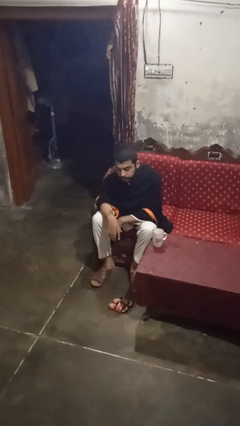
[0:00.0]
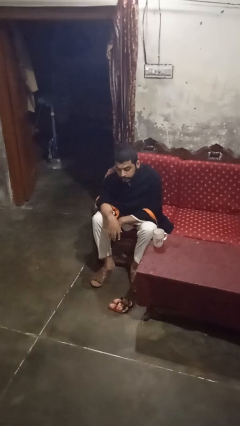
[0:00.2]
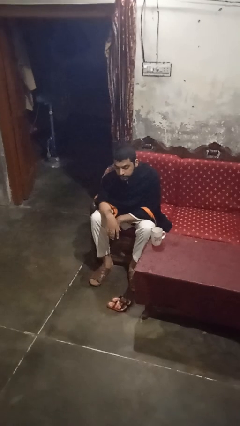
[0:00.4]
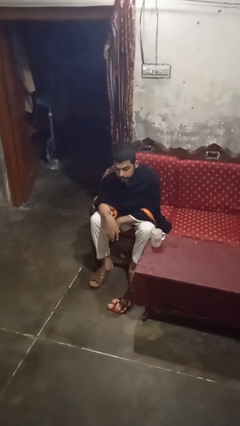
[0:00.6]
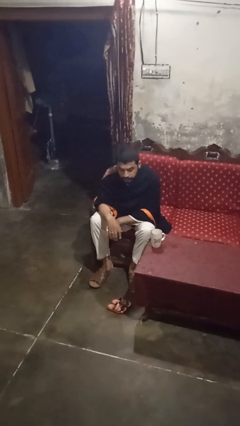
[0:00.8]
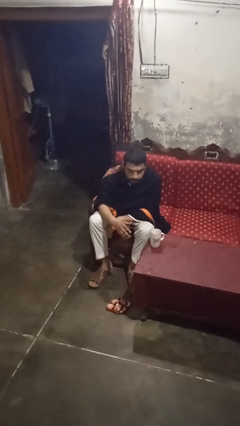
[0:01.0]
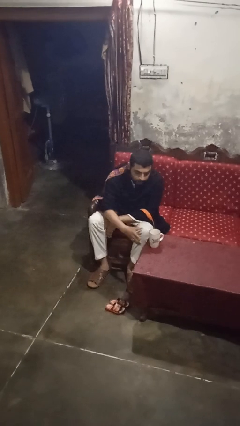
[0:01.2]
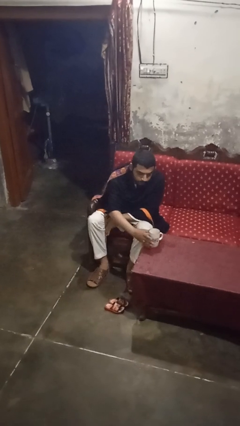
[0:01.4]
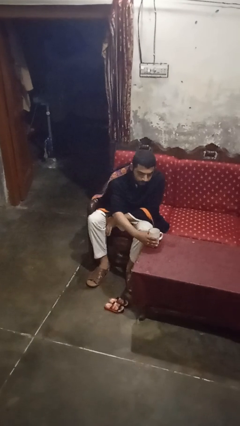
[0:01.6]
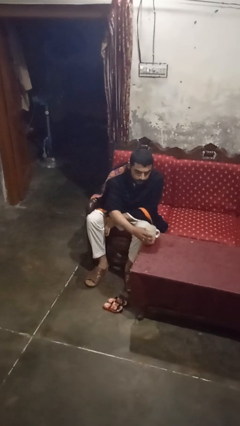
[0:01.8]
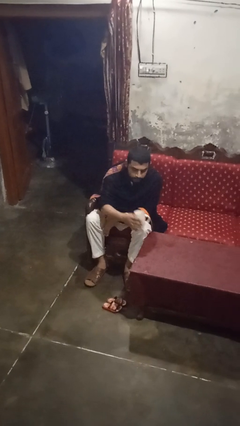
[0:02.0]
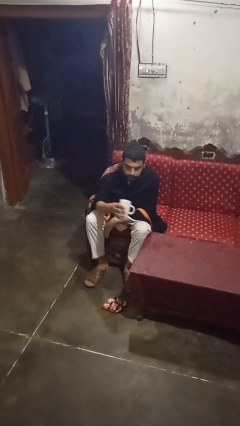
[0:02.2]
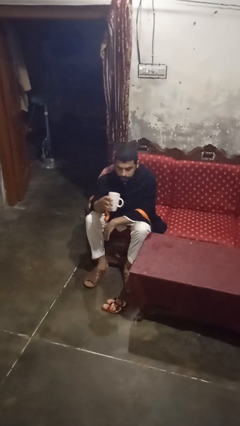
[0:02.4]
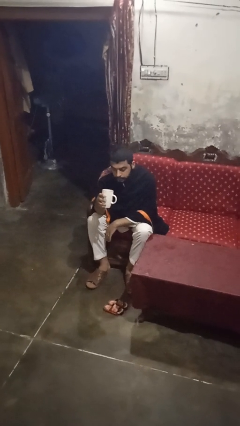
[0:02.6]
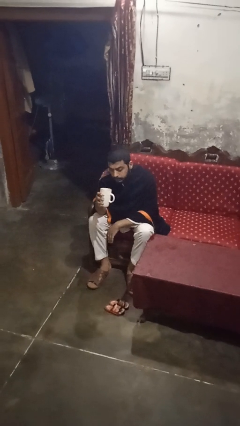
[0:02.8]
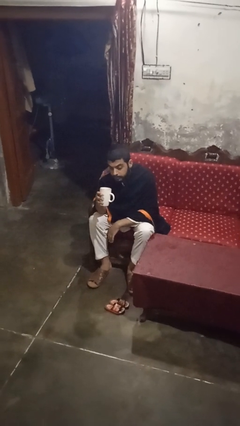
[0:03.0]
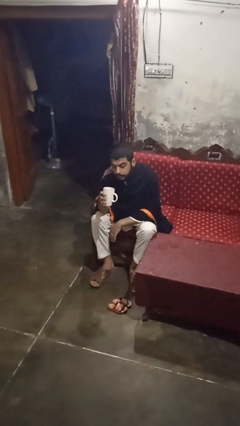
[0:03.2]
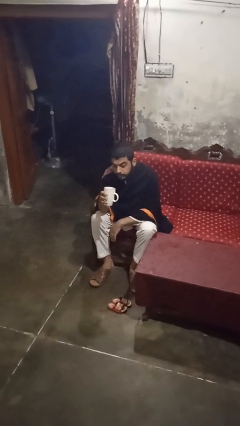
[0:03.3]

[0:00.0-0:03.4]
person picks up object from table

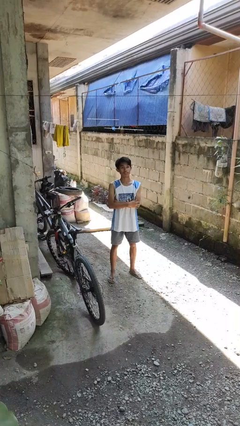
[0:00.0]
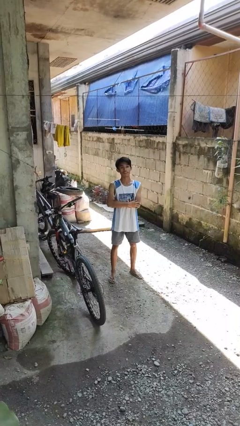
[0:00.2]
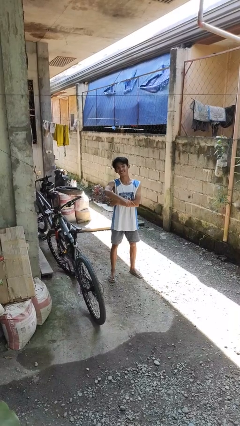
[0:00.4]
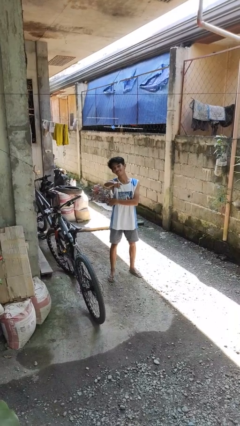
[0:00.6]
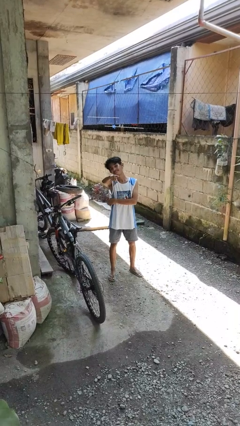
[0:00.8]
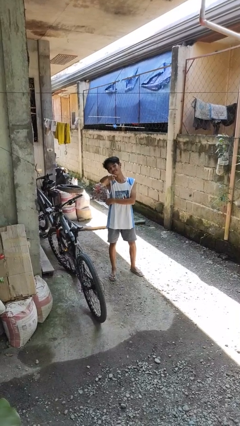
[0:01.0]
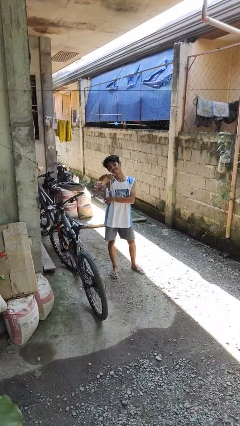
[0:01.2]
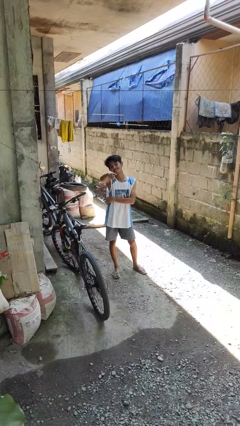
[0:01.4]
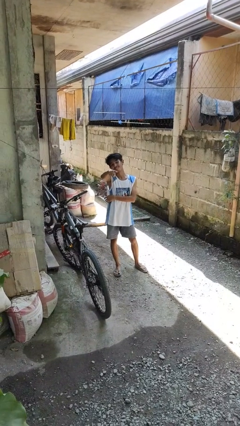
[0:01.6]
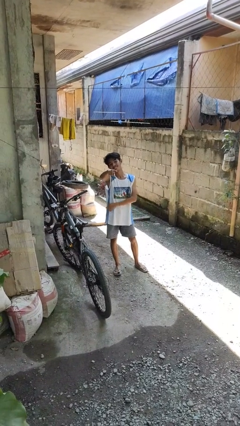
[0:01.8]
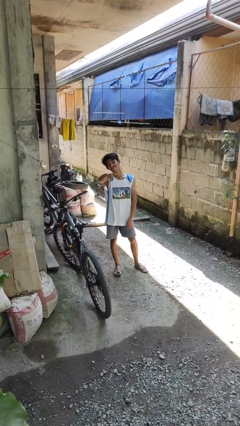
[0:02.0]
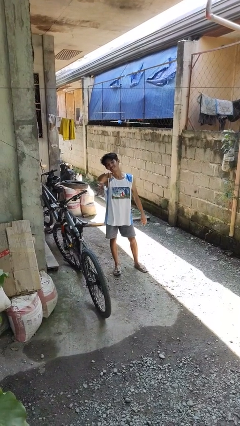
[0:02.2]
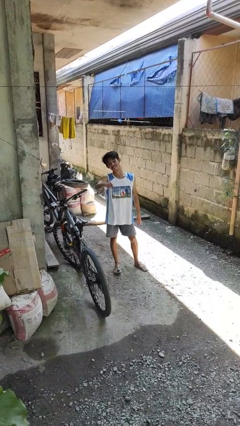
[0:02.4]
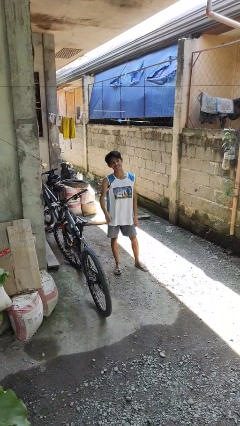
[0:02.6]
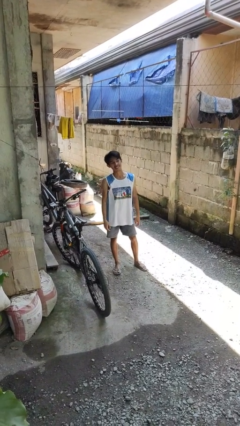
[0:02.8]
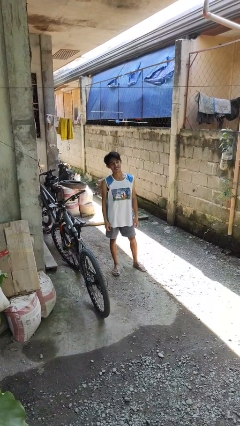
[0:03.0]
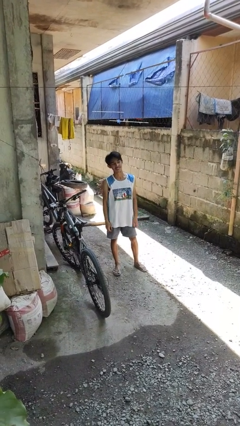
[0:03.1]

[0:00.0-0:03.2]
person points at person

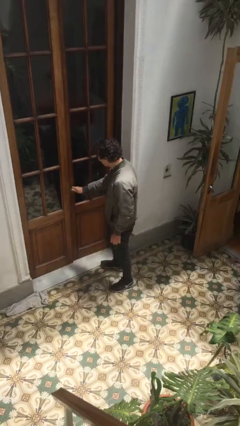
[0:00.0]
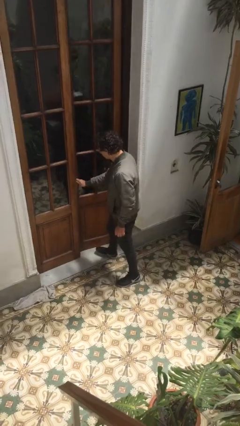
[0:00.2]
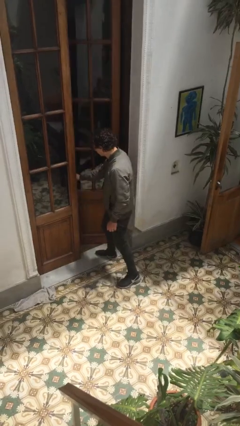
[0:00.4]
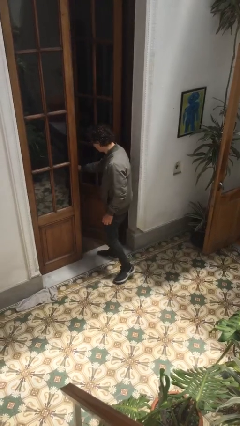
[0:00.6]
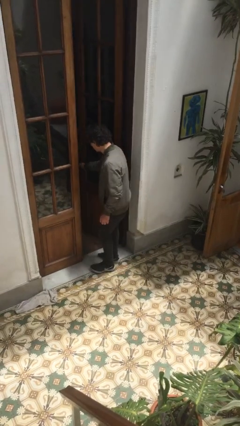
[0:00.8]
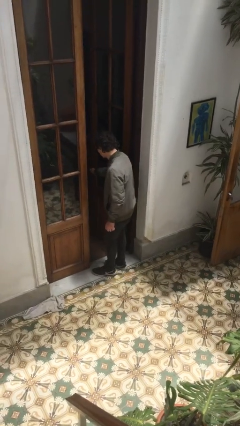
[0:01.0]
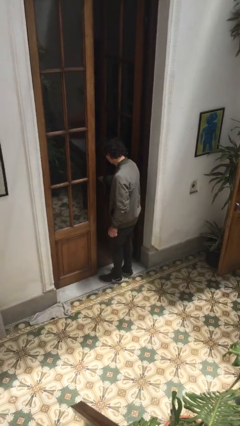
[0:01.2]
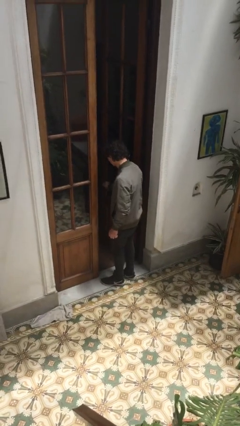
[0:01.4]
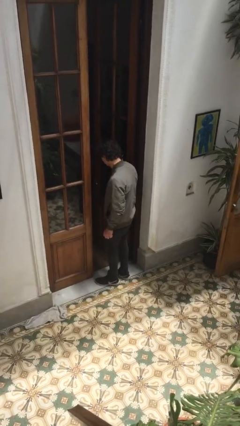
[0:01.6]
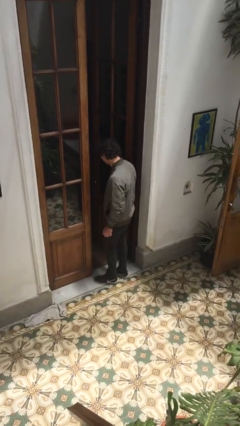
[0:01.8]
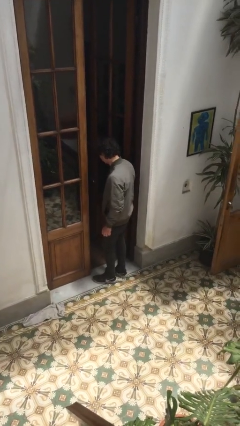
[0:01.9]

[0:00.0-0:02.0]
person opens facility door

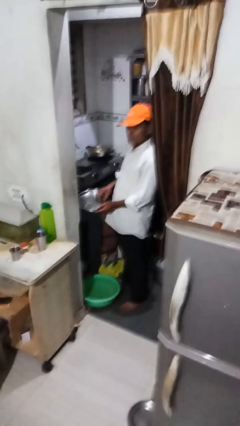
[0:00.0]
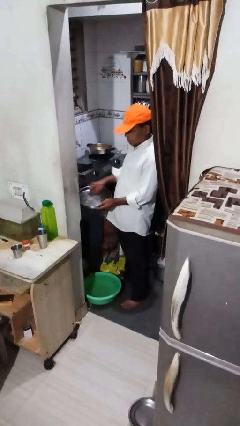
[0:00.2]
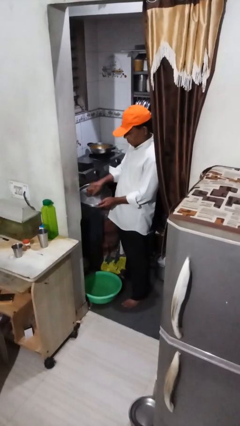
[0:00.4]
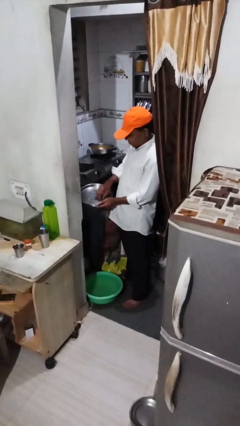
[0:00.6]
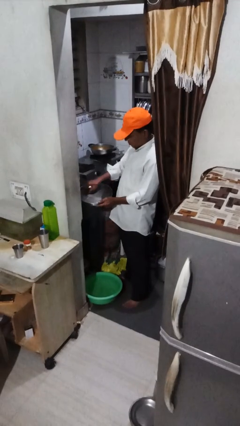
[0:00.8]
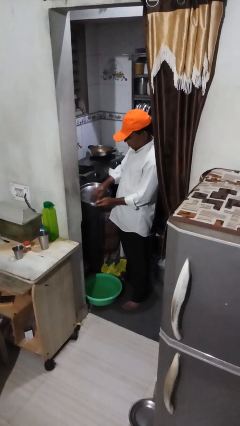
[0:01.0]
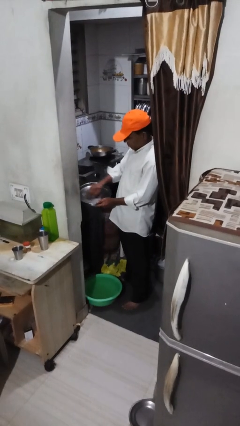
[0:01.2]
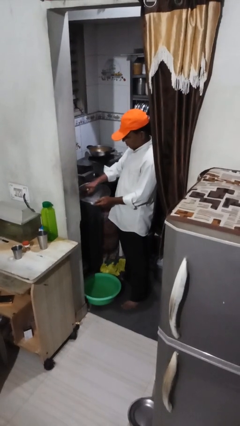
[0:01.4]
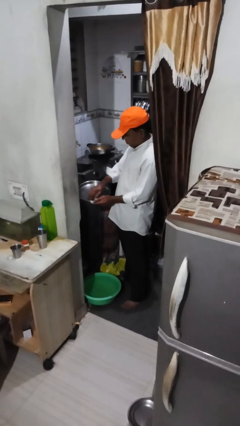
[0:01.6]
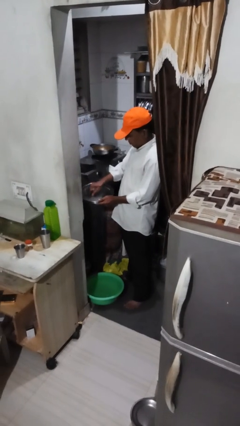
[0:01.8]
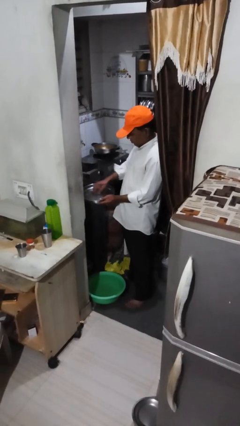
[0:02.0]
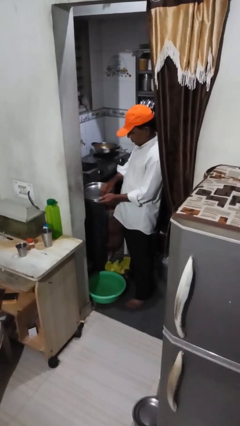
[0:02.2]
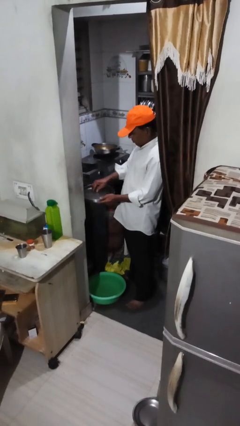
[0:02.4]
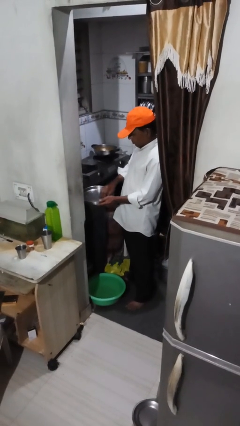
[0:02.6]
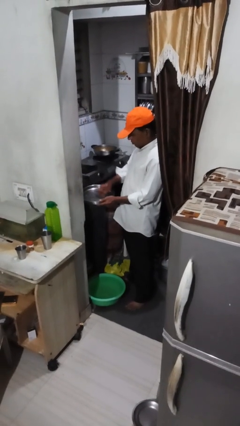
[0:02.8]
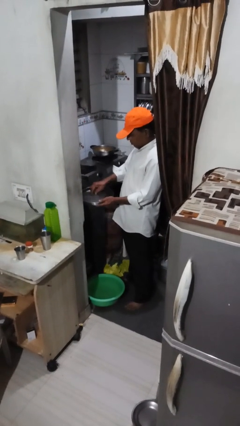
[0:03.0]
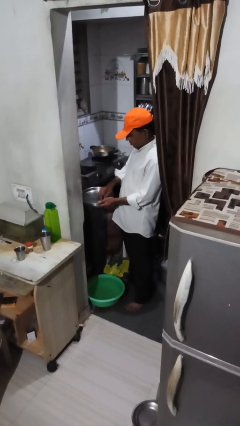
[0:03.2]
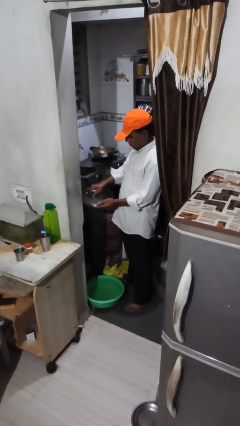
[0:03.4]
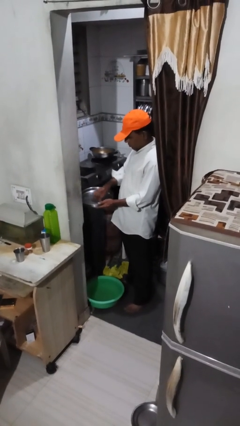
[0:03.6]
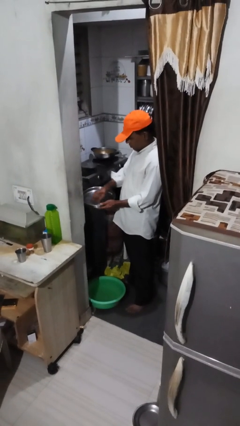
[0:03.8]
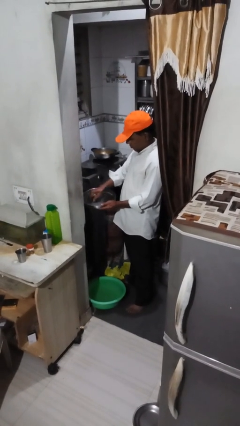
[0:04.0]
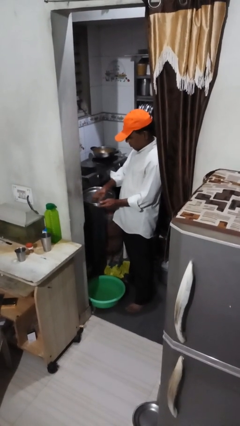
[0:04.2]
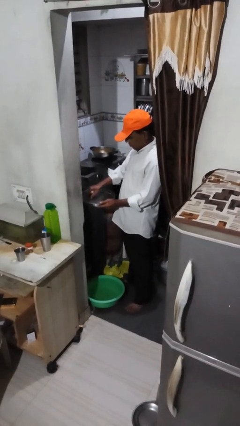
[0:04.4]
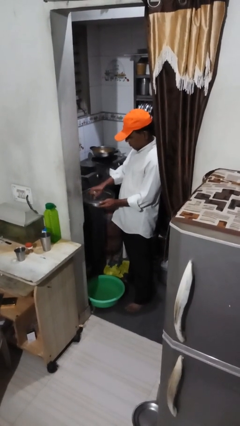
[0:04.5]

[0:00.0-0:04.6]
person washes dish

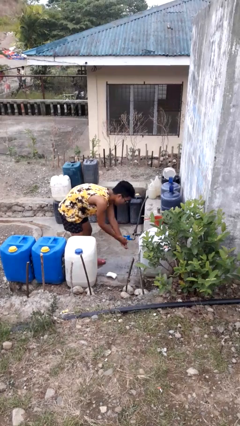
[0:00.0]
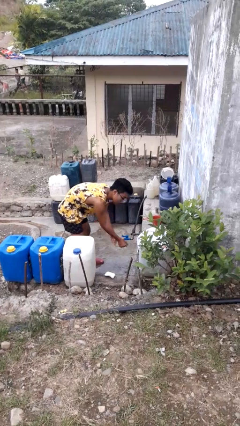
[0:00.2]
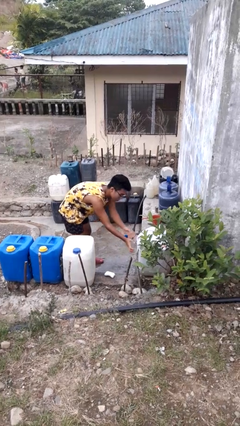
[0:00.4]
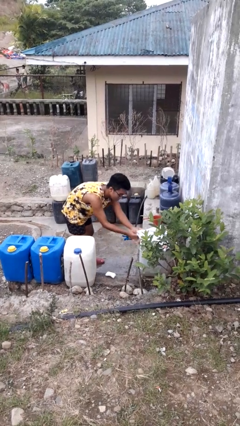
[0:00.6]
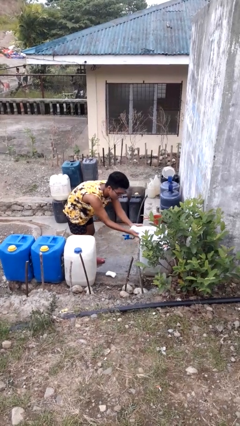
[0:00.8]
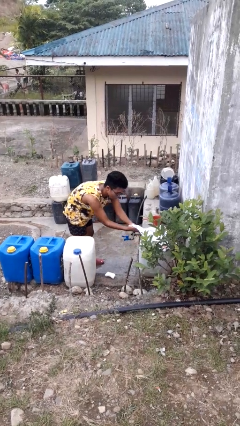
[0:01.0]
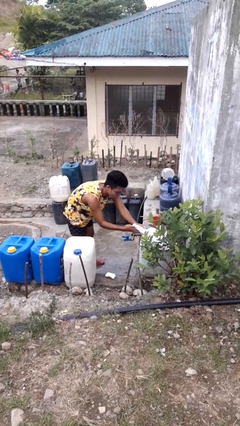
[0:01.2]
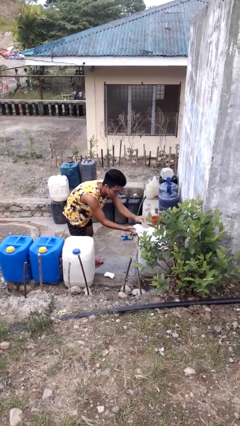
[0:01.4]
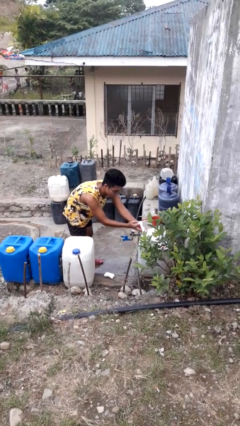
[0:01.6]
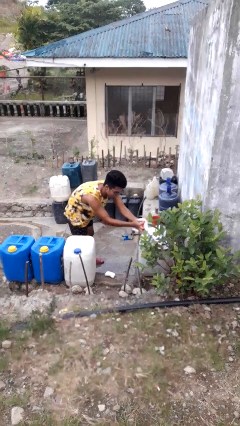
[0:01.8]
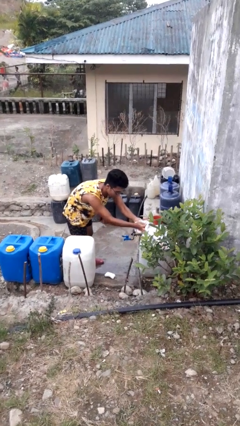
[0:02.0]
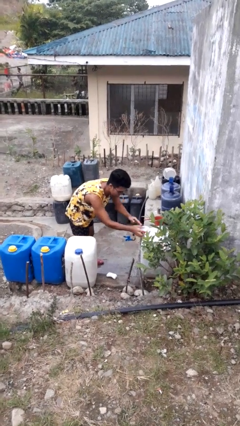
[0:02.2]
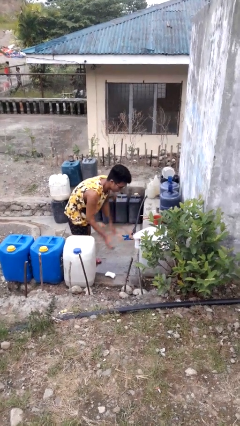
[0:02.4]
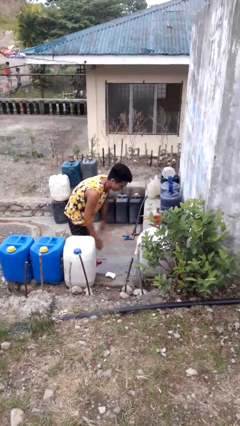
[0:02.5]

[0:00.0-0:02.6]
person dries hands with towel

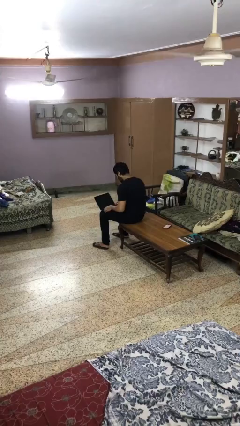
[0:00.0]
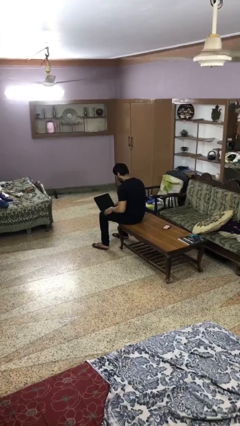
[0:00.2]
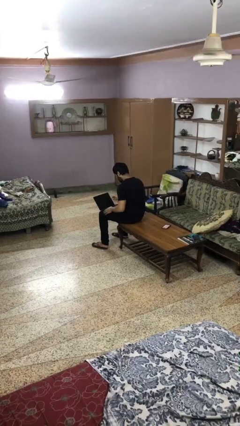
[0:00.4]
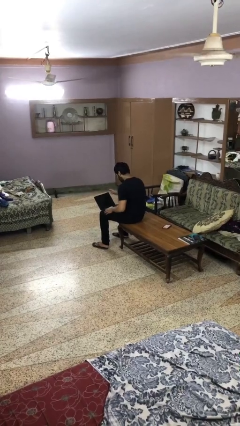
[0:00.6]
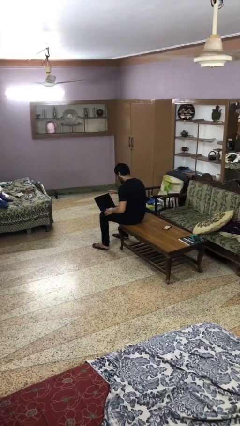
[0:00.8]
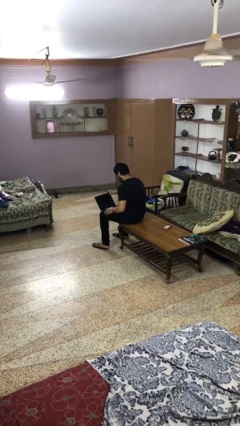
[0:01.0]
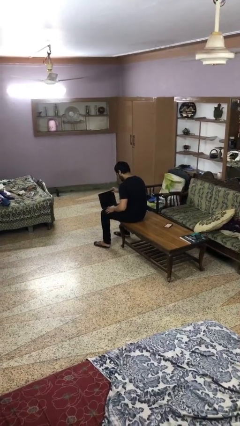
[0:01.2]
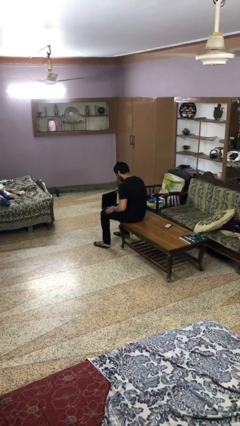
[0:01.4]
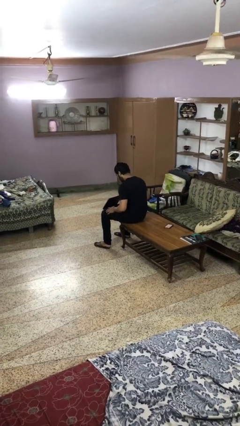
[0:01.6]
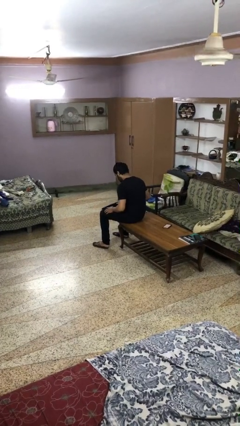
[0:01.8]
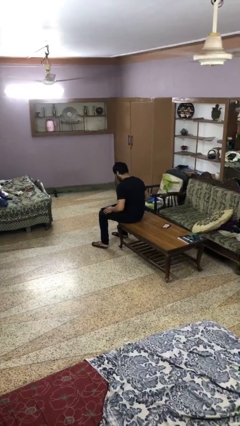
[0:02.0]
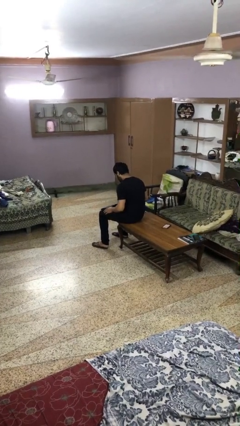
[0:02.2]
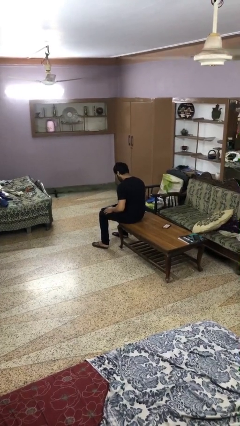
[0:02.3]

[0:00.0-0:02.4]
person closes laptop
